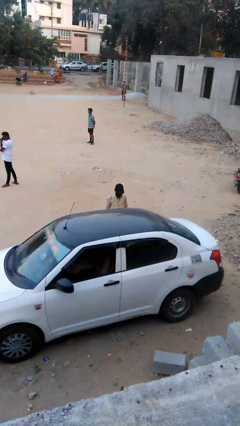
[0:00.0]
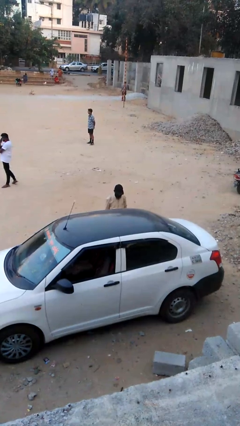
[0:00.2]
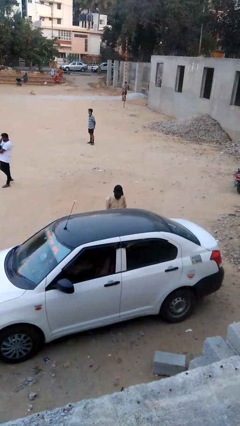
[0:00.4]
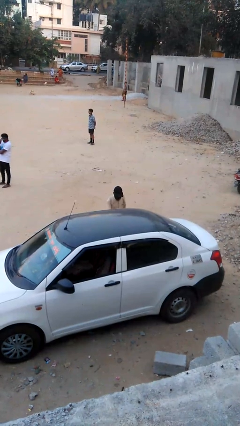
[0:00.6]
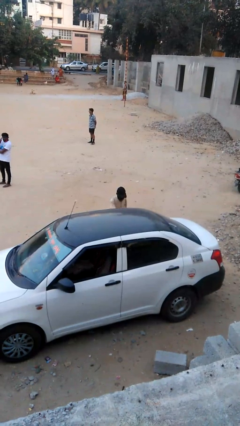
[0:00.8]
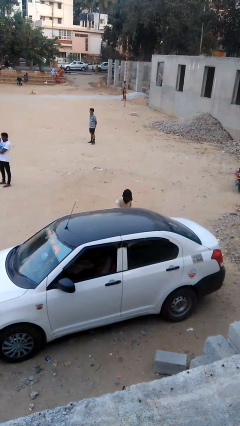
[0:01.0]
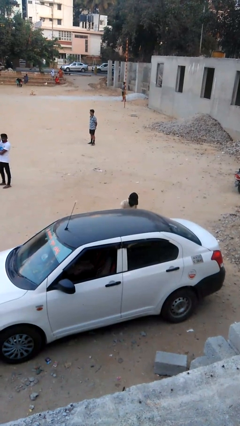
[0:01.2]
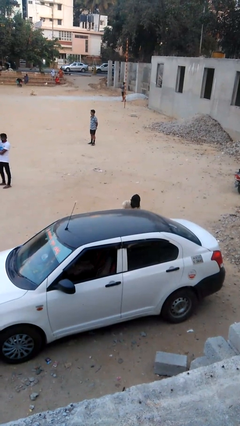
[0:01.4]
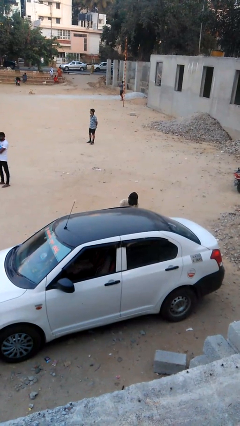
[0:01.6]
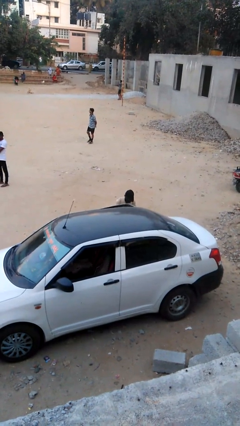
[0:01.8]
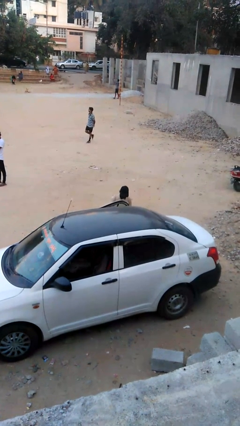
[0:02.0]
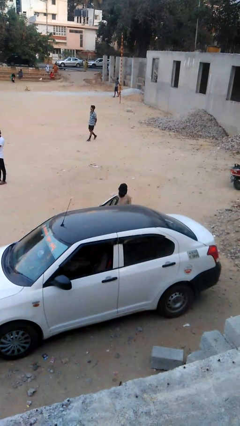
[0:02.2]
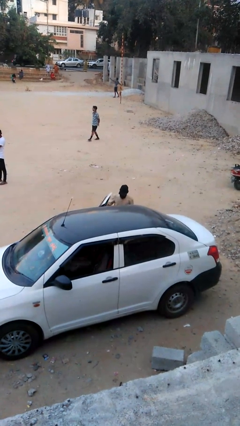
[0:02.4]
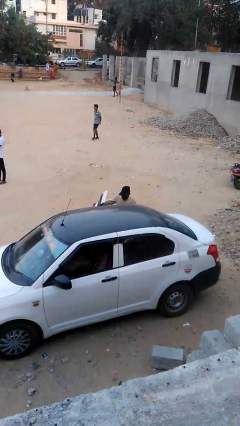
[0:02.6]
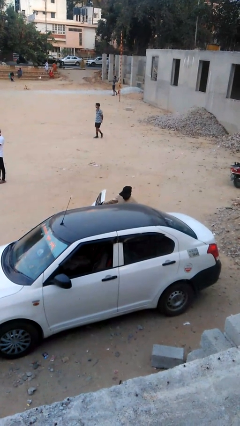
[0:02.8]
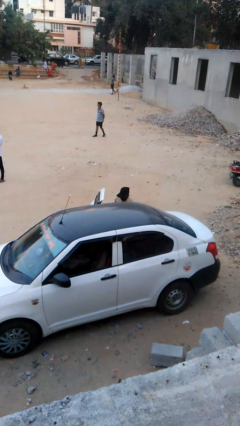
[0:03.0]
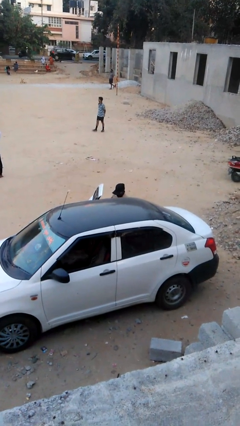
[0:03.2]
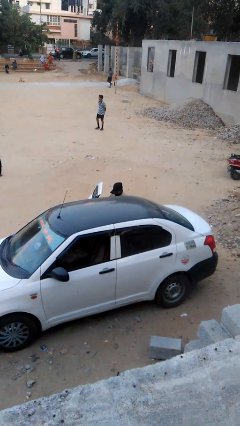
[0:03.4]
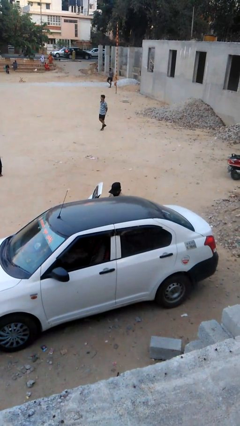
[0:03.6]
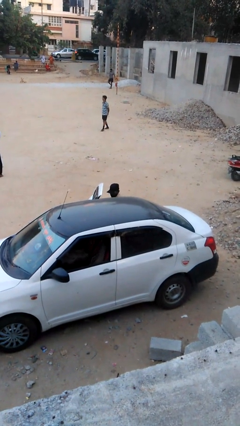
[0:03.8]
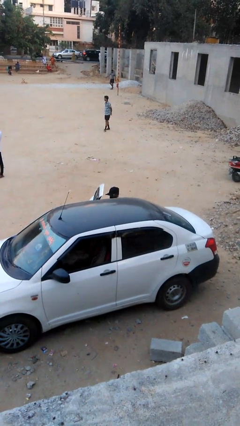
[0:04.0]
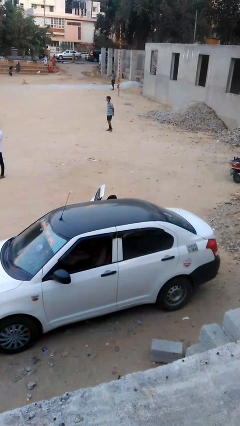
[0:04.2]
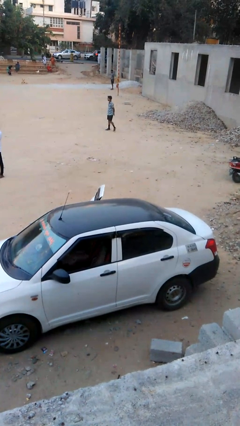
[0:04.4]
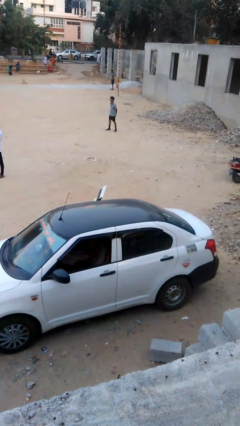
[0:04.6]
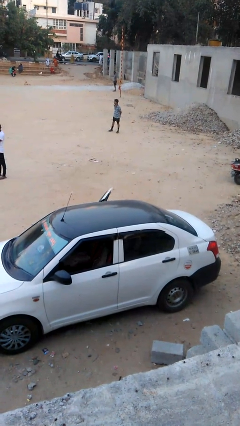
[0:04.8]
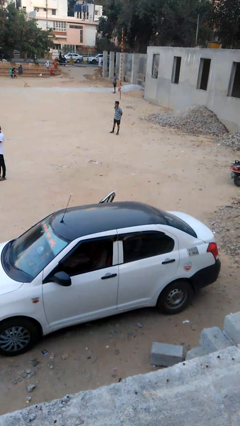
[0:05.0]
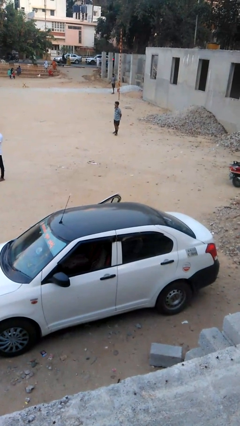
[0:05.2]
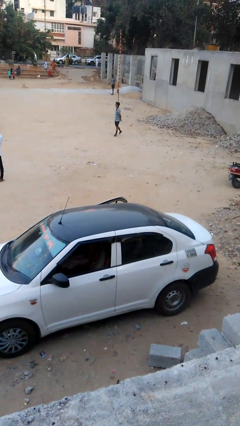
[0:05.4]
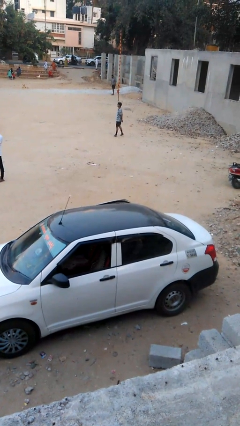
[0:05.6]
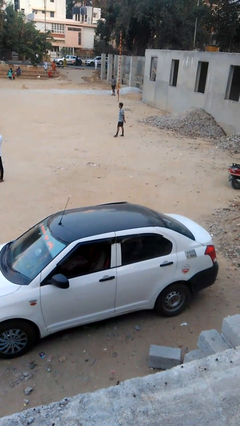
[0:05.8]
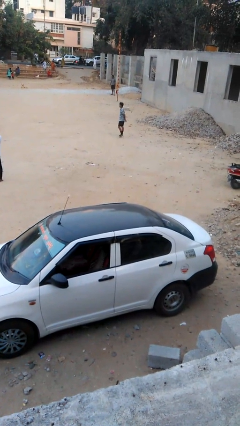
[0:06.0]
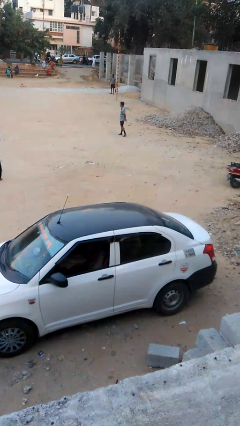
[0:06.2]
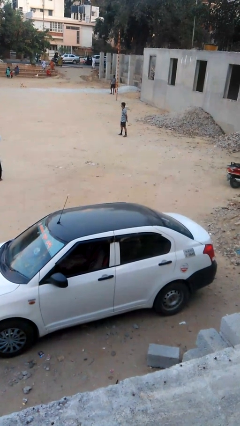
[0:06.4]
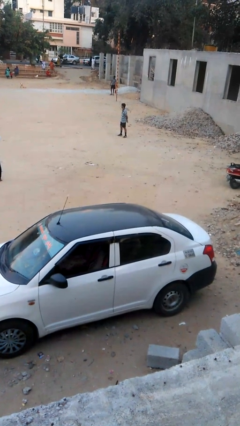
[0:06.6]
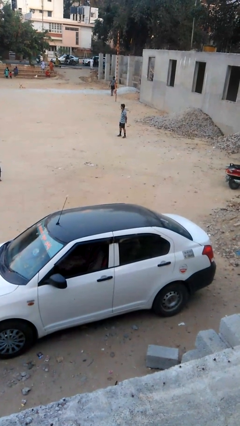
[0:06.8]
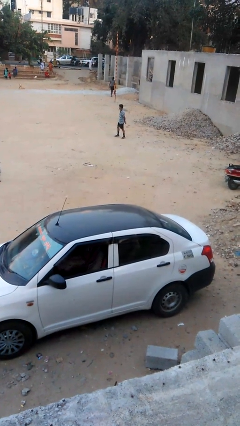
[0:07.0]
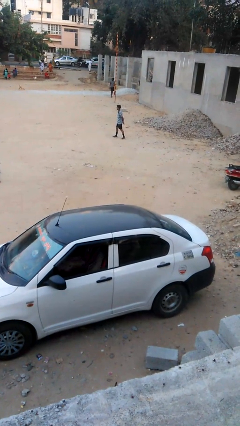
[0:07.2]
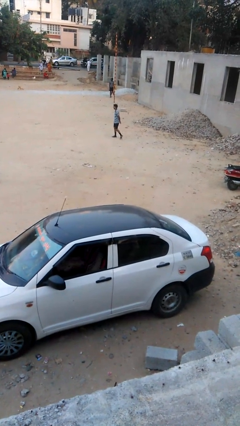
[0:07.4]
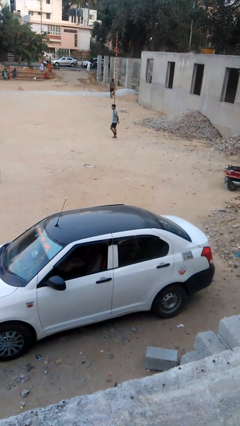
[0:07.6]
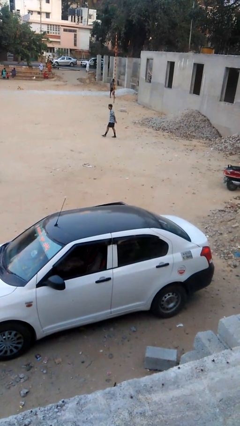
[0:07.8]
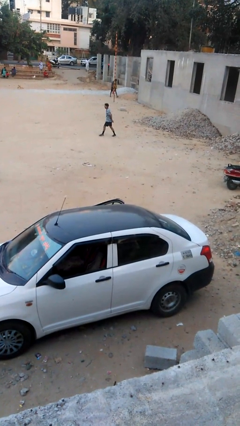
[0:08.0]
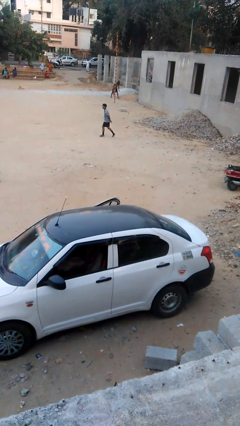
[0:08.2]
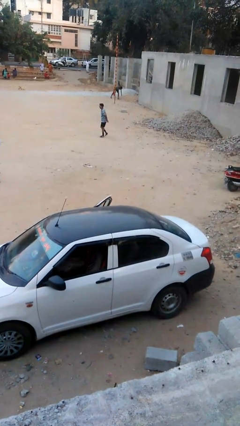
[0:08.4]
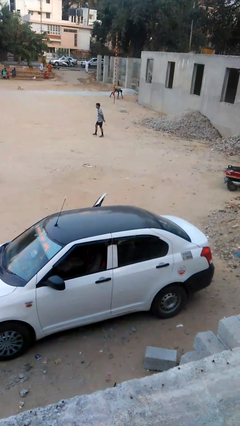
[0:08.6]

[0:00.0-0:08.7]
person enters car

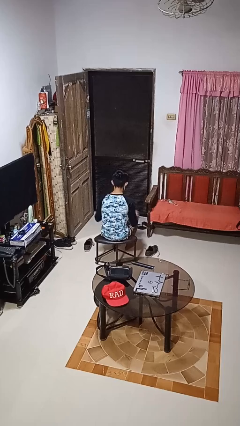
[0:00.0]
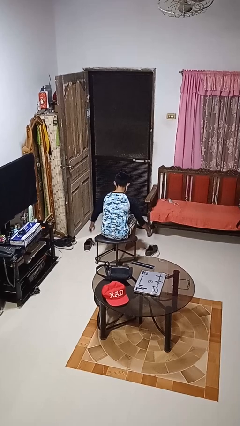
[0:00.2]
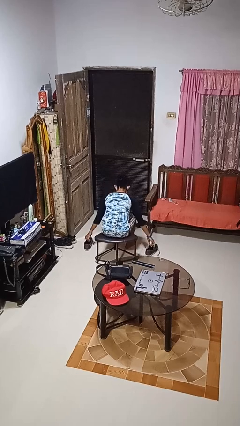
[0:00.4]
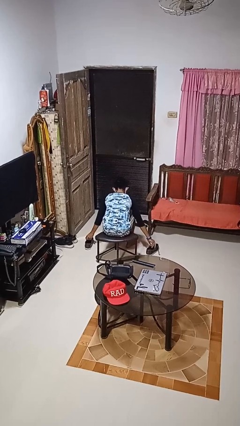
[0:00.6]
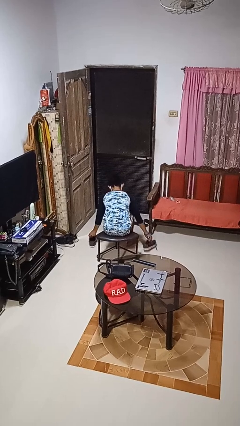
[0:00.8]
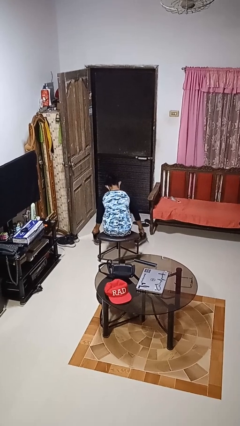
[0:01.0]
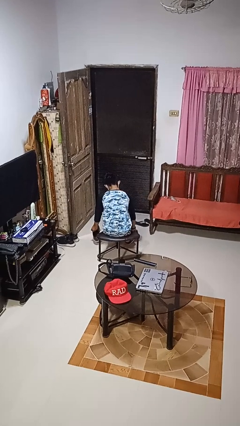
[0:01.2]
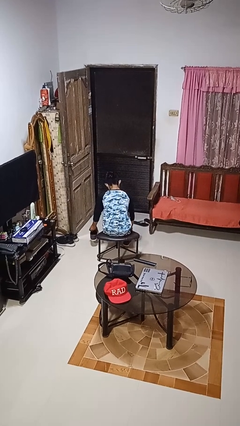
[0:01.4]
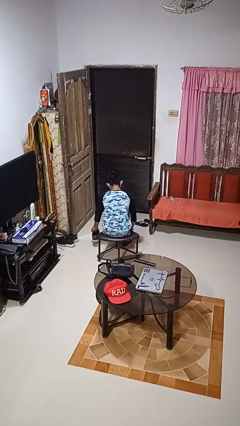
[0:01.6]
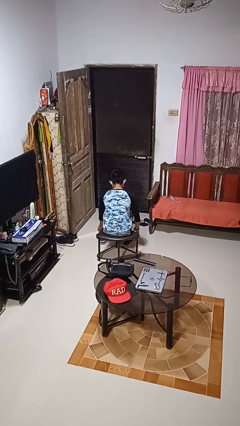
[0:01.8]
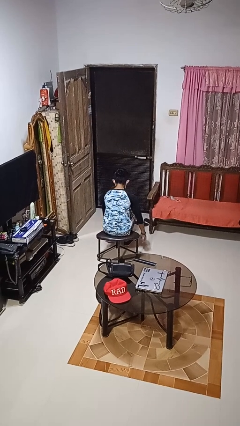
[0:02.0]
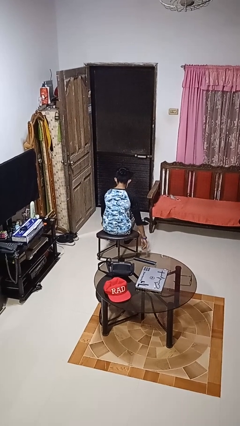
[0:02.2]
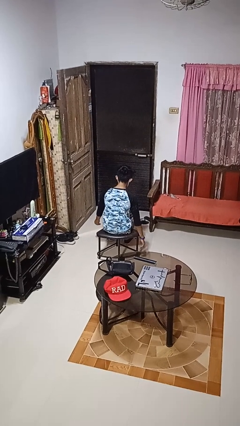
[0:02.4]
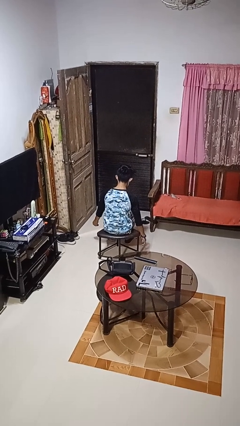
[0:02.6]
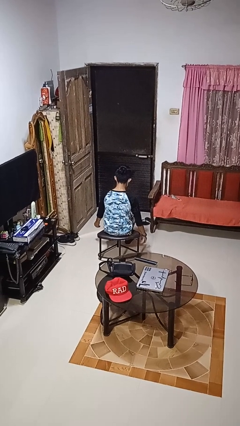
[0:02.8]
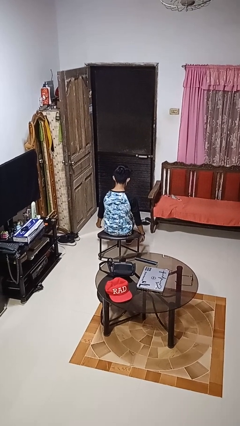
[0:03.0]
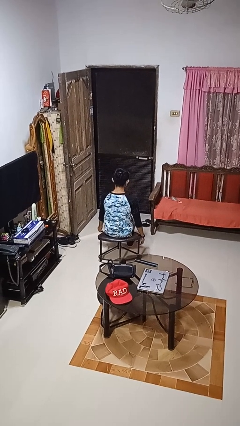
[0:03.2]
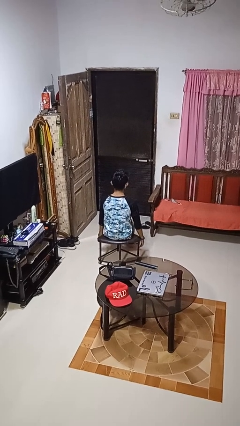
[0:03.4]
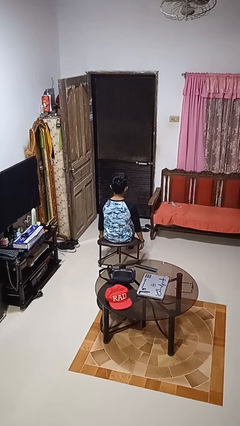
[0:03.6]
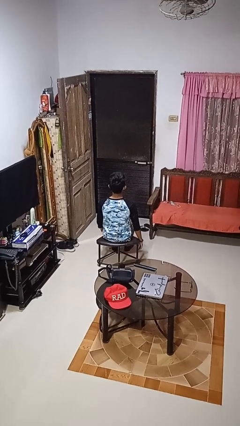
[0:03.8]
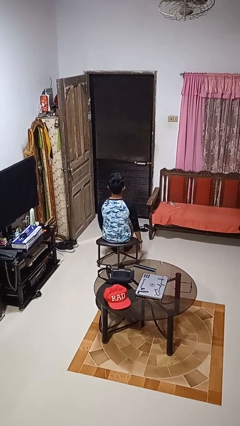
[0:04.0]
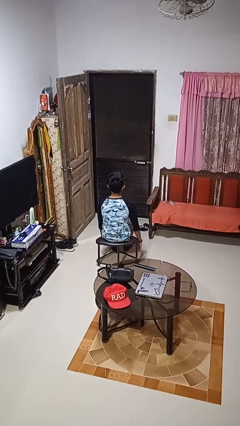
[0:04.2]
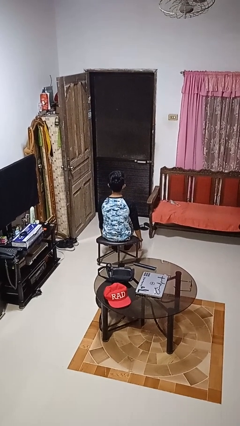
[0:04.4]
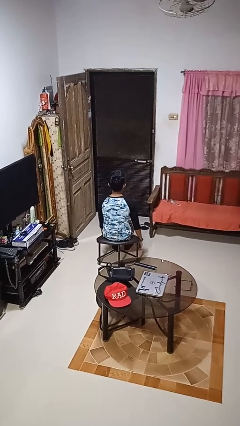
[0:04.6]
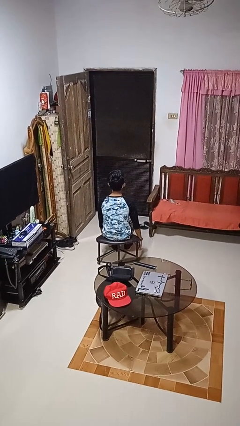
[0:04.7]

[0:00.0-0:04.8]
person puts on shoes

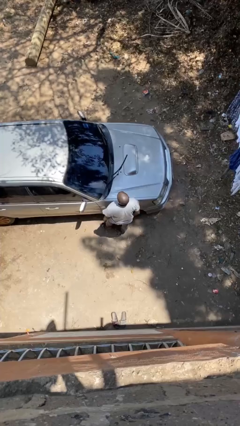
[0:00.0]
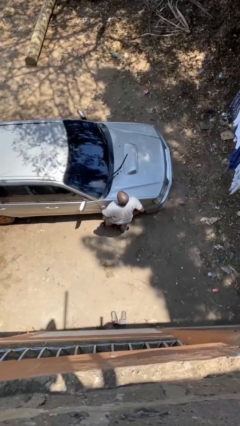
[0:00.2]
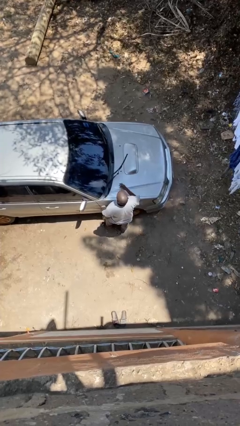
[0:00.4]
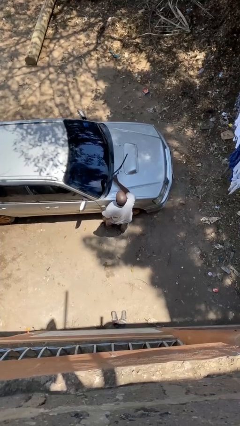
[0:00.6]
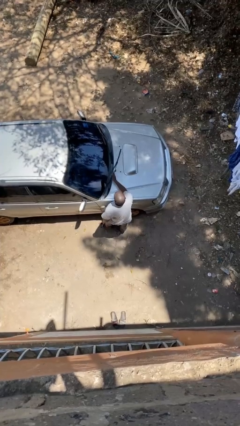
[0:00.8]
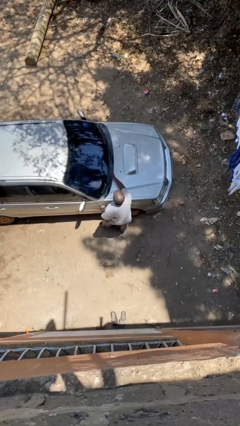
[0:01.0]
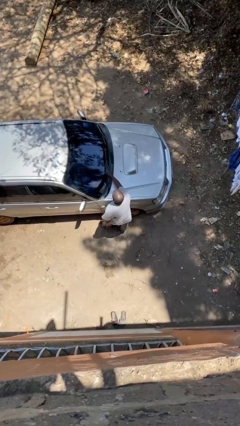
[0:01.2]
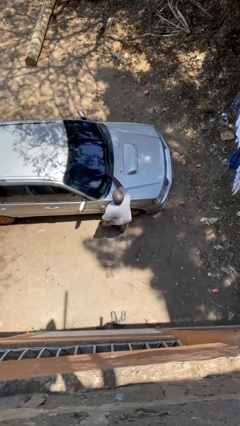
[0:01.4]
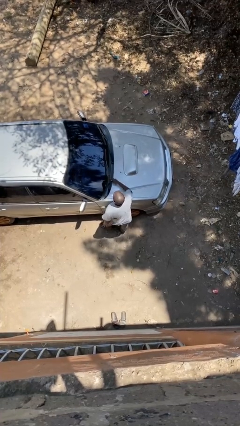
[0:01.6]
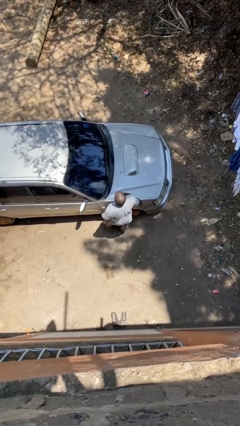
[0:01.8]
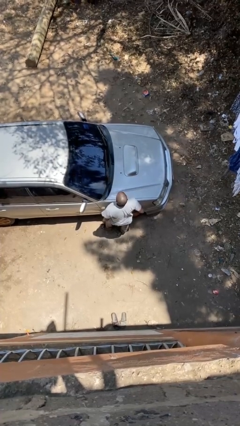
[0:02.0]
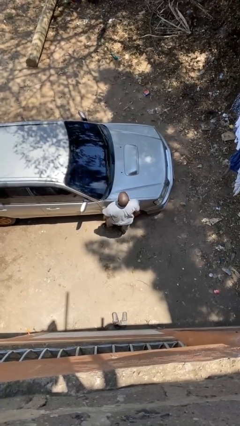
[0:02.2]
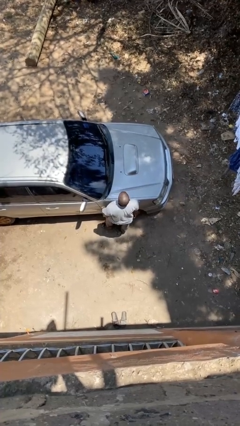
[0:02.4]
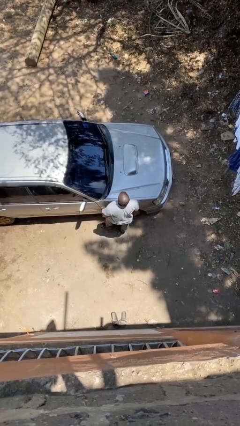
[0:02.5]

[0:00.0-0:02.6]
person flips down car wipers

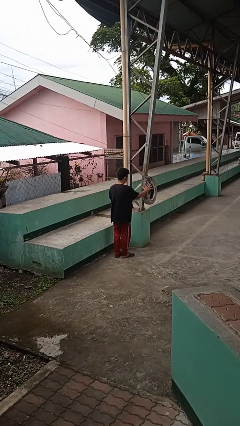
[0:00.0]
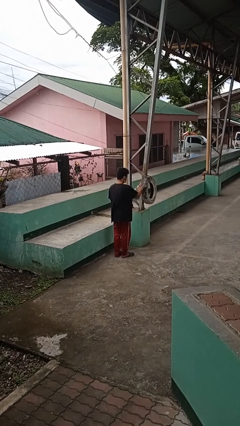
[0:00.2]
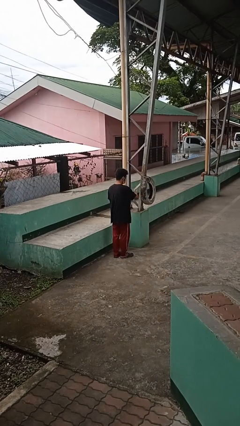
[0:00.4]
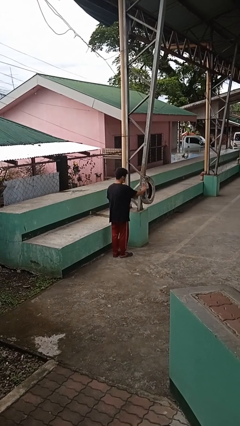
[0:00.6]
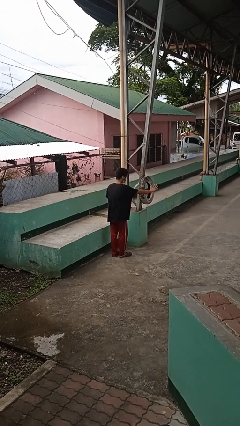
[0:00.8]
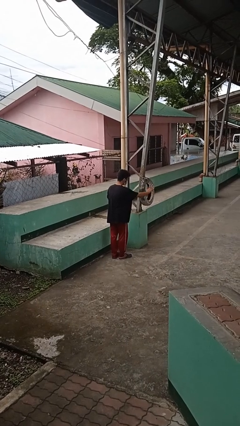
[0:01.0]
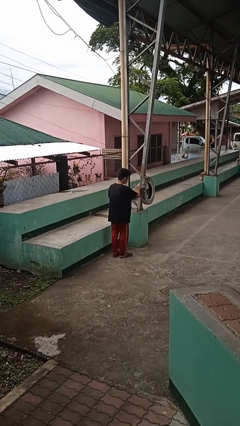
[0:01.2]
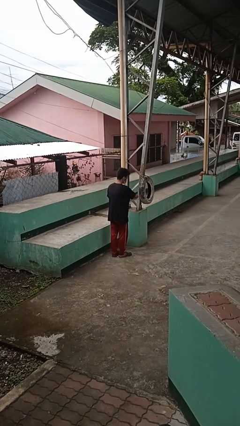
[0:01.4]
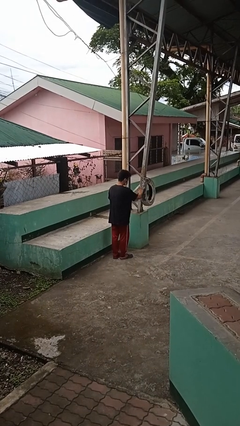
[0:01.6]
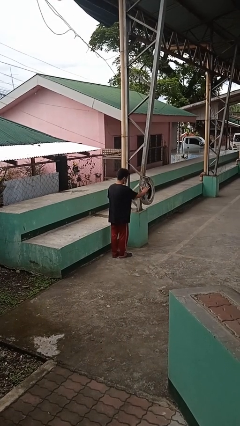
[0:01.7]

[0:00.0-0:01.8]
person waves hand over object
